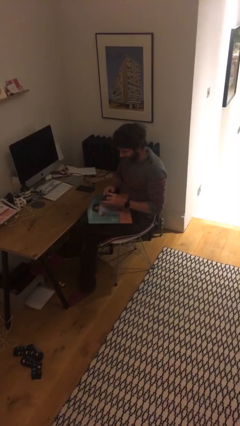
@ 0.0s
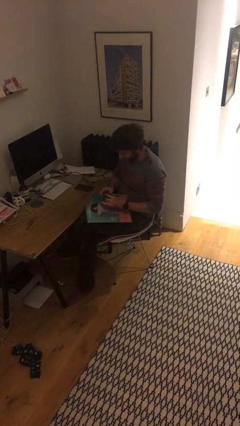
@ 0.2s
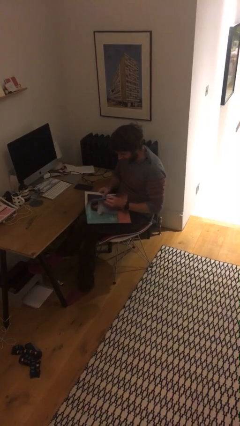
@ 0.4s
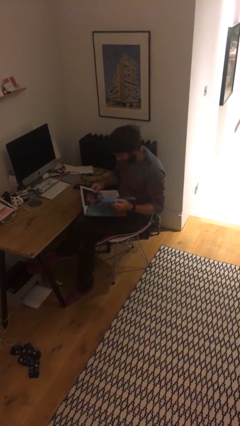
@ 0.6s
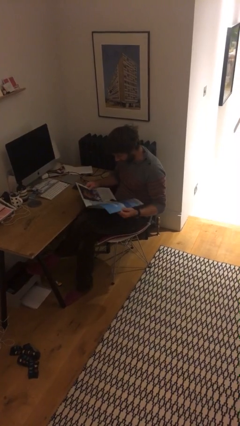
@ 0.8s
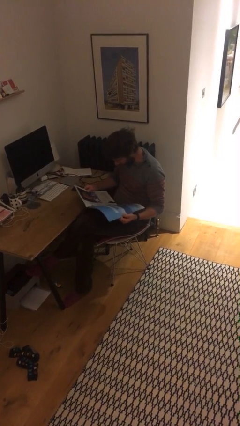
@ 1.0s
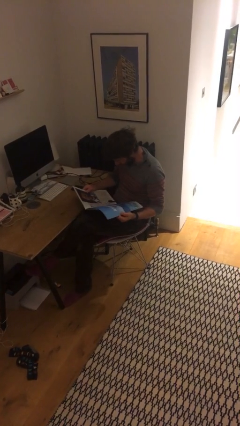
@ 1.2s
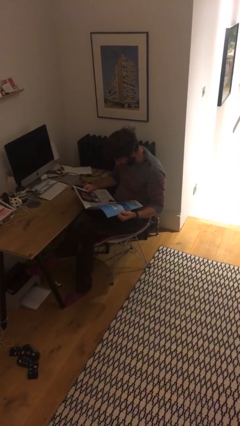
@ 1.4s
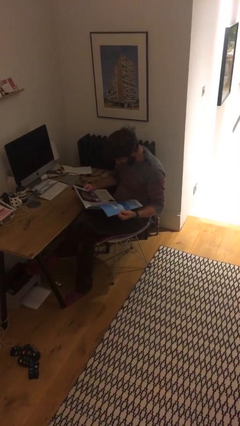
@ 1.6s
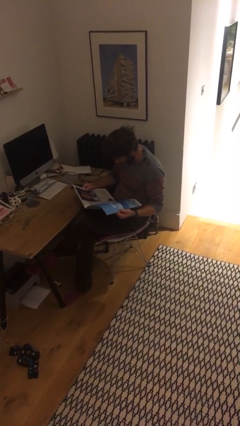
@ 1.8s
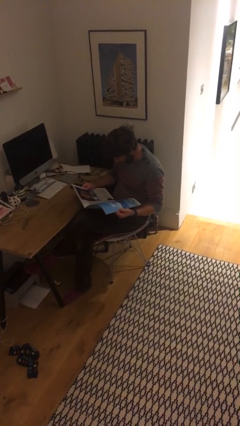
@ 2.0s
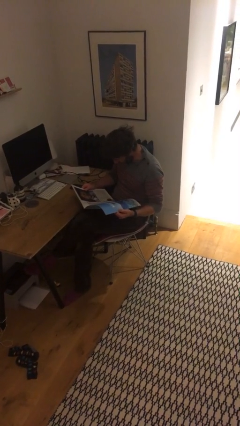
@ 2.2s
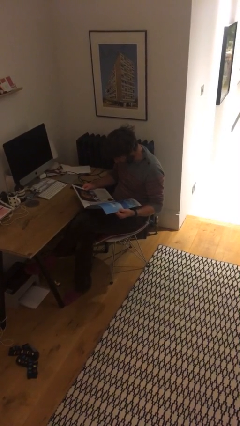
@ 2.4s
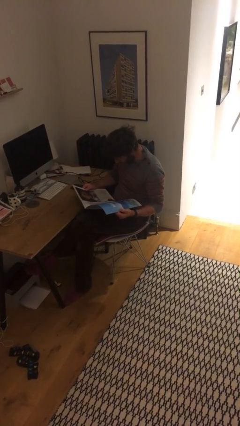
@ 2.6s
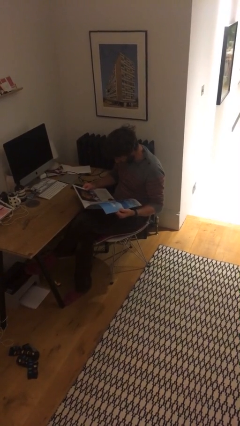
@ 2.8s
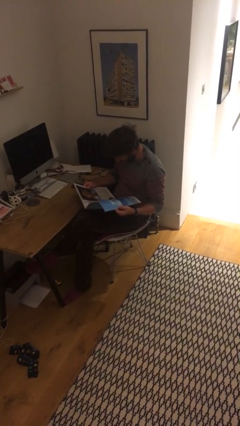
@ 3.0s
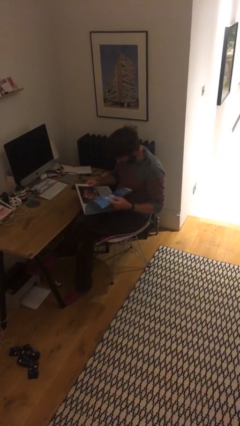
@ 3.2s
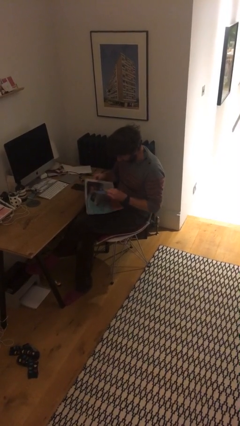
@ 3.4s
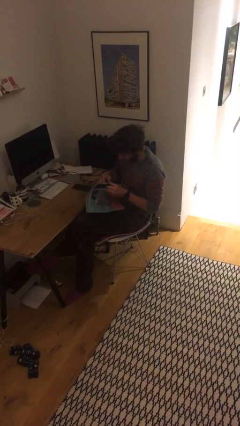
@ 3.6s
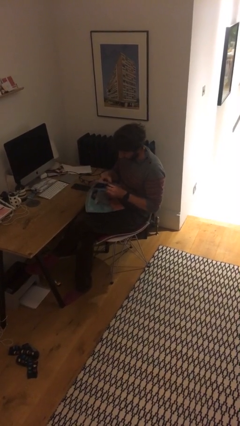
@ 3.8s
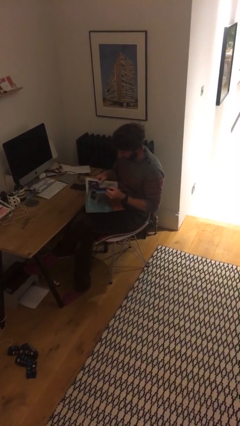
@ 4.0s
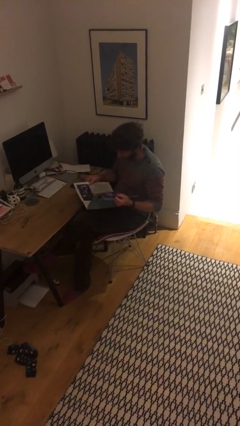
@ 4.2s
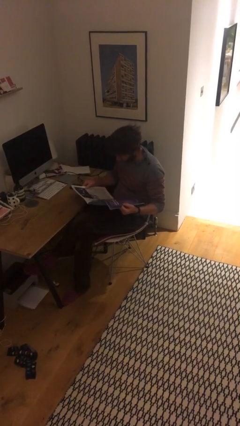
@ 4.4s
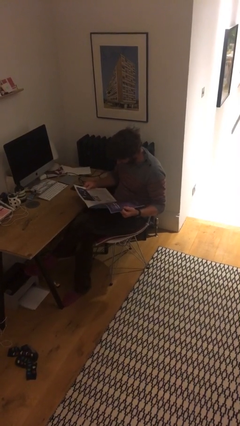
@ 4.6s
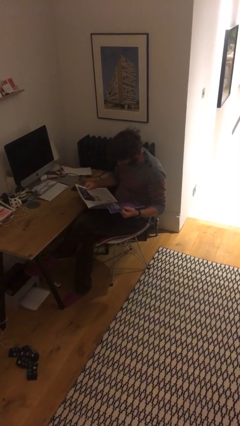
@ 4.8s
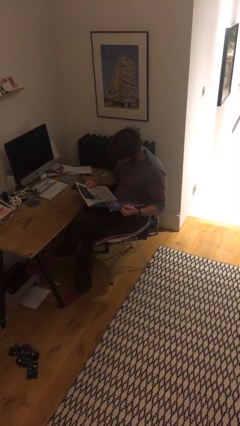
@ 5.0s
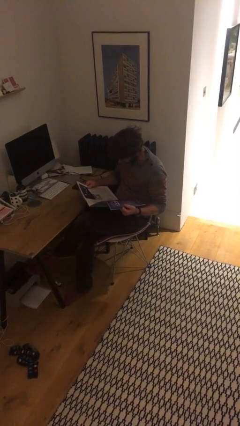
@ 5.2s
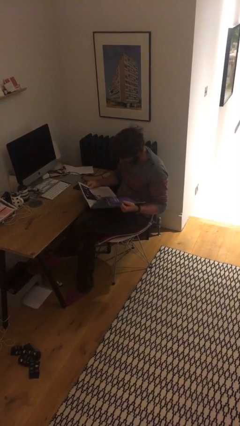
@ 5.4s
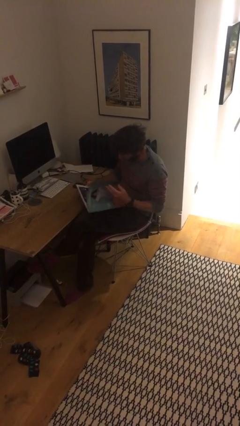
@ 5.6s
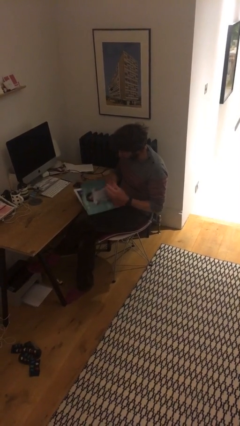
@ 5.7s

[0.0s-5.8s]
person reads document

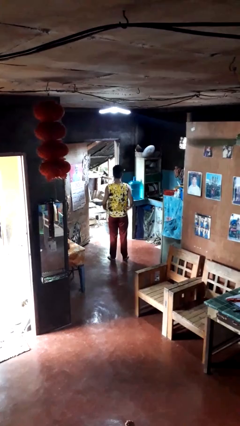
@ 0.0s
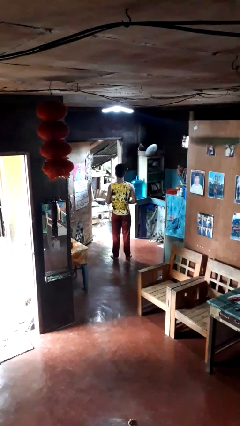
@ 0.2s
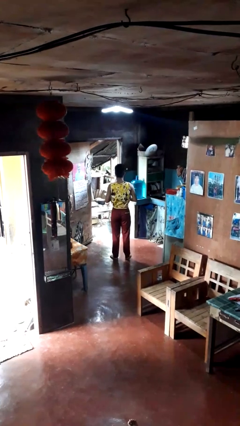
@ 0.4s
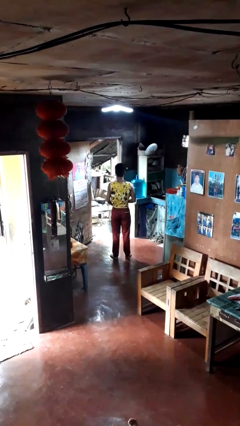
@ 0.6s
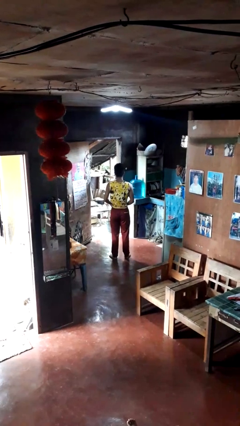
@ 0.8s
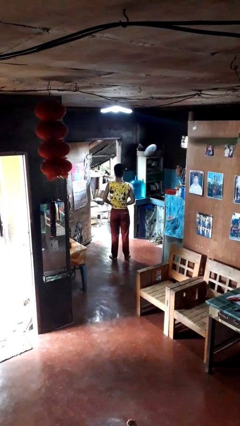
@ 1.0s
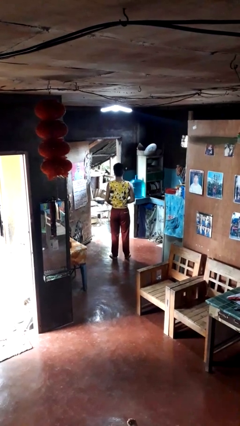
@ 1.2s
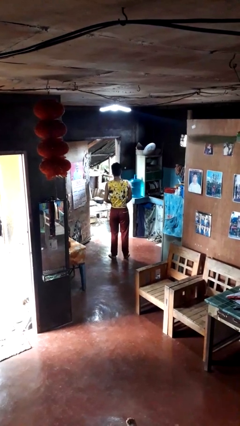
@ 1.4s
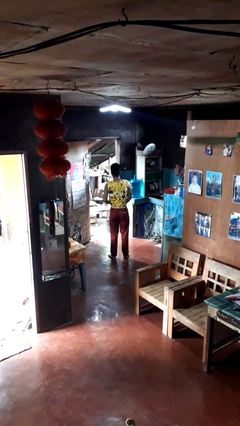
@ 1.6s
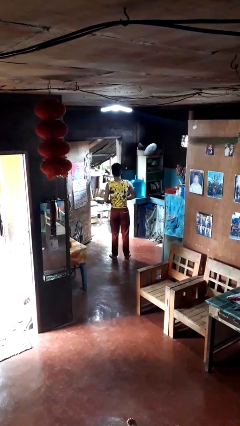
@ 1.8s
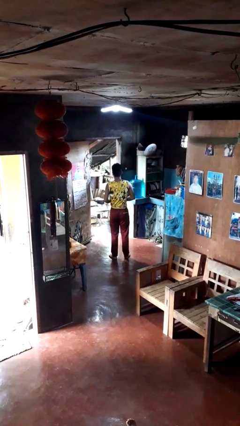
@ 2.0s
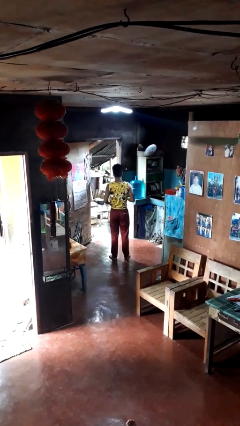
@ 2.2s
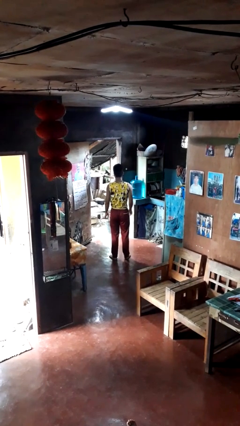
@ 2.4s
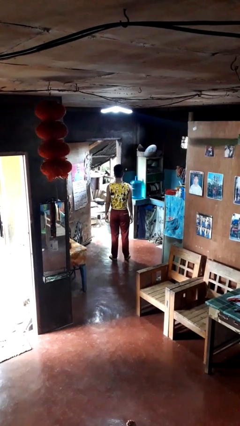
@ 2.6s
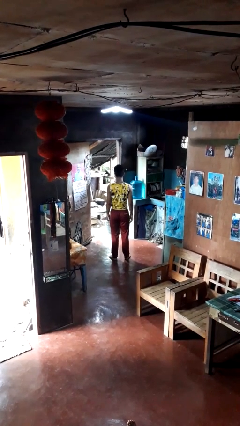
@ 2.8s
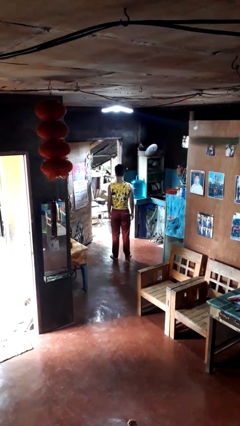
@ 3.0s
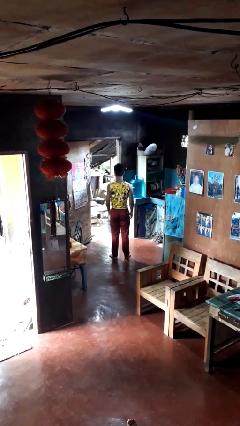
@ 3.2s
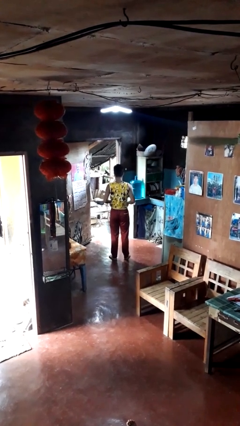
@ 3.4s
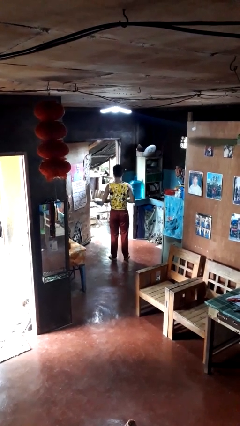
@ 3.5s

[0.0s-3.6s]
person tucks in shirt

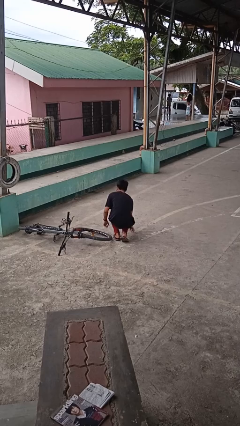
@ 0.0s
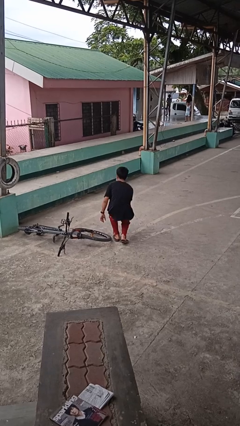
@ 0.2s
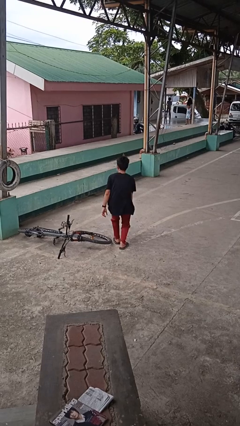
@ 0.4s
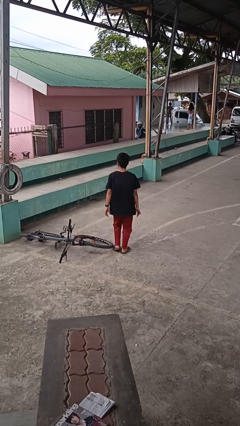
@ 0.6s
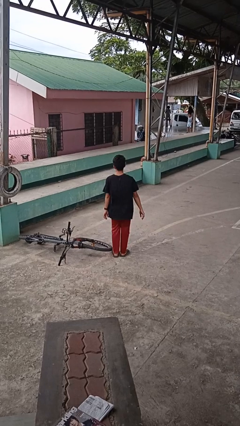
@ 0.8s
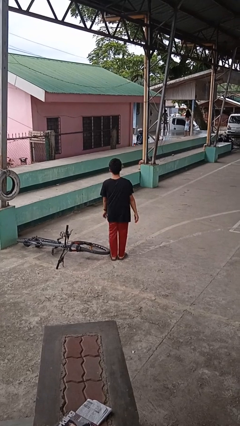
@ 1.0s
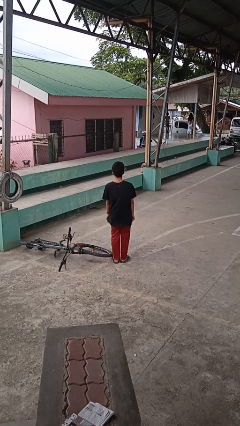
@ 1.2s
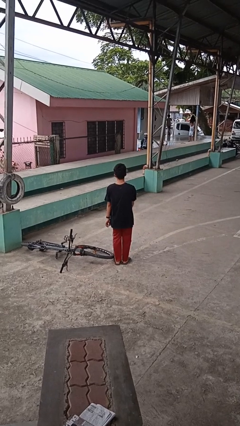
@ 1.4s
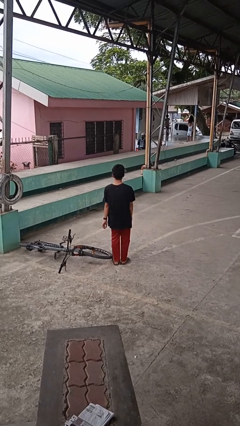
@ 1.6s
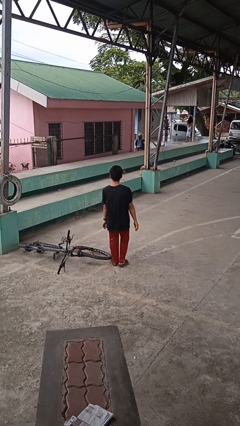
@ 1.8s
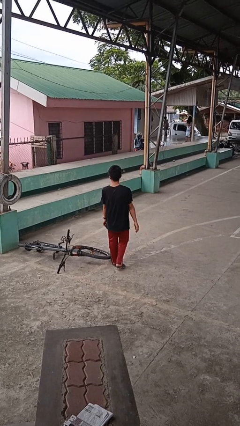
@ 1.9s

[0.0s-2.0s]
person stands up from floor

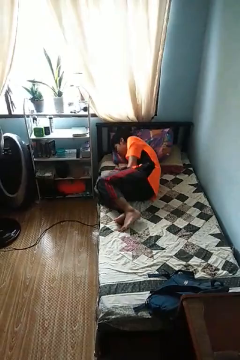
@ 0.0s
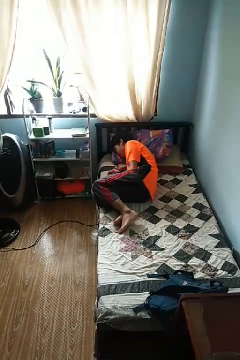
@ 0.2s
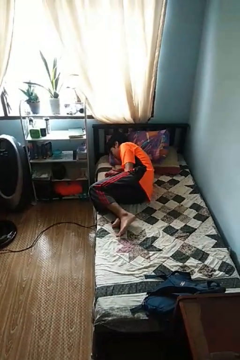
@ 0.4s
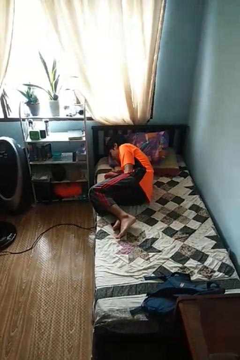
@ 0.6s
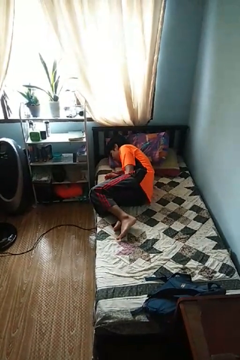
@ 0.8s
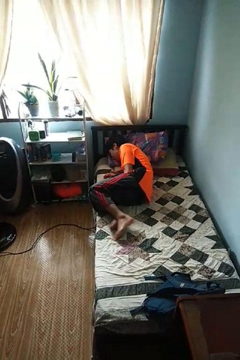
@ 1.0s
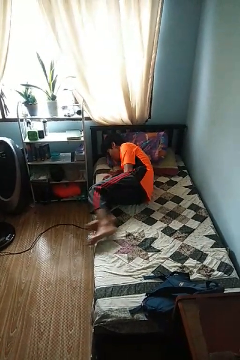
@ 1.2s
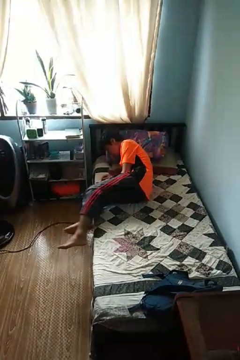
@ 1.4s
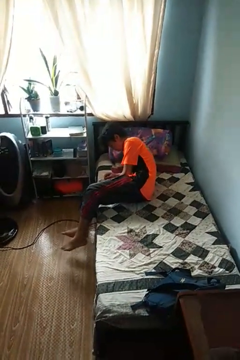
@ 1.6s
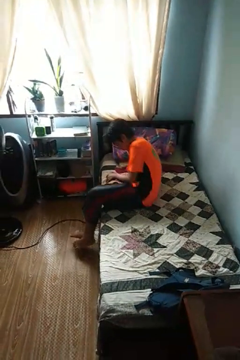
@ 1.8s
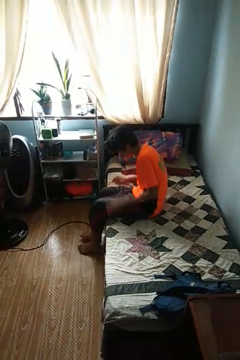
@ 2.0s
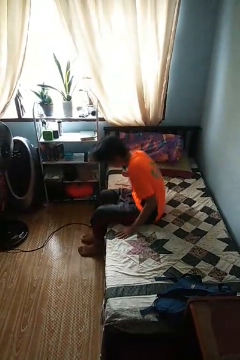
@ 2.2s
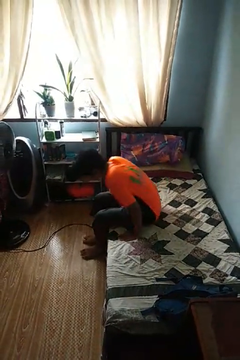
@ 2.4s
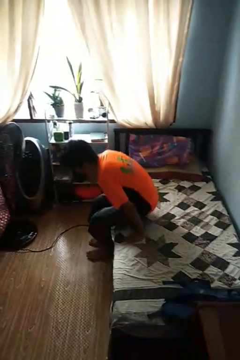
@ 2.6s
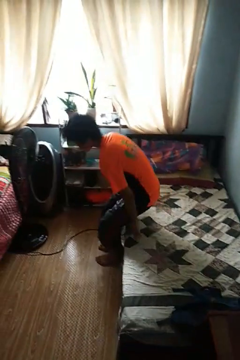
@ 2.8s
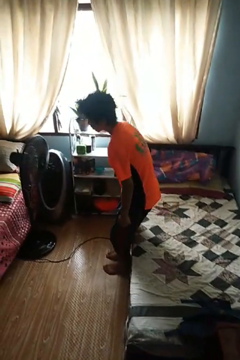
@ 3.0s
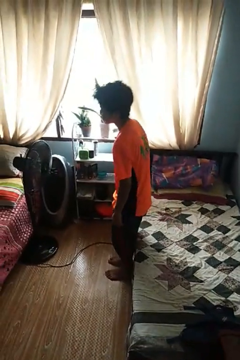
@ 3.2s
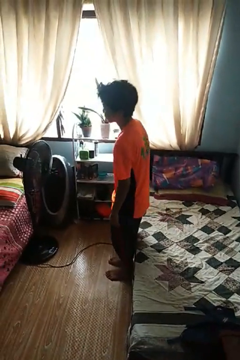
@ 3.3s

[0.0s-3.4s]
person stands up

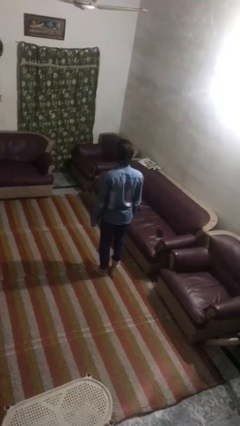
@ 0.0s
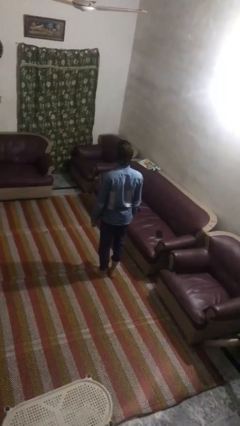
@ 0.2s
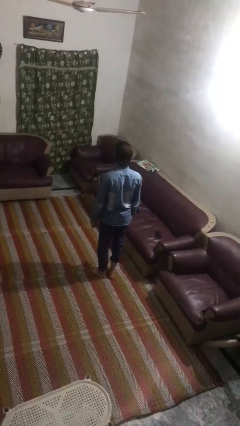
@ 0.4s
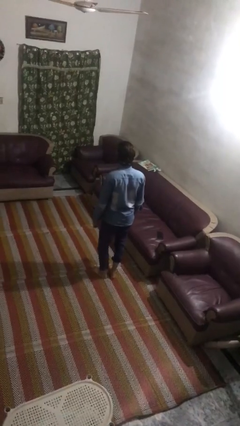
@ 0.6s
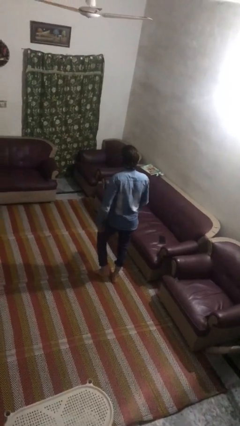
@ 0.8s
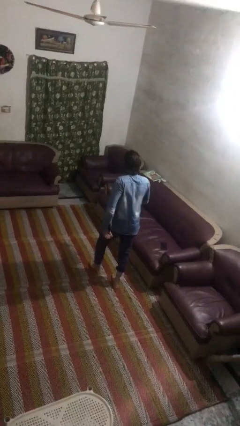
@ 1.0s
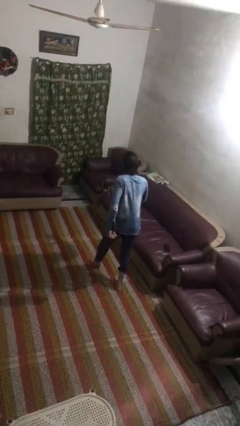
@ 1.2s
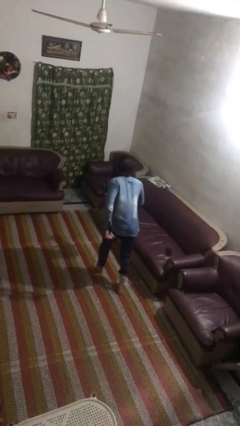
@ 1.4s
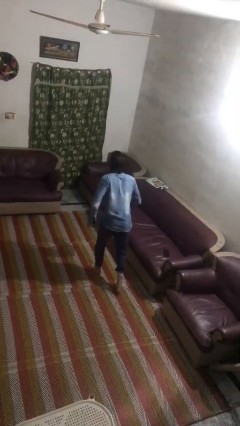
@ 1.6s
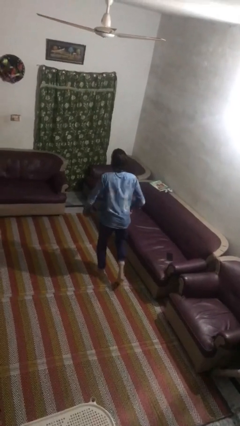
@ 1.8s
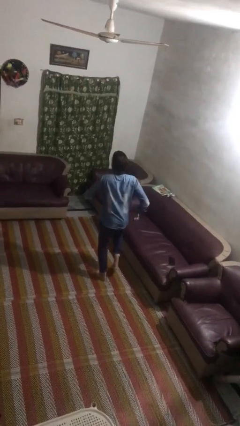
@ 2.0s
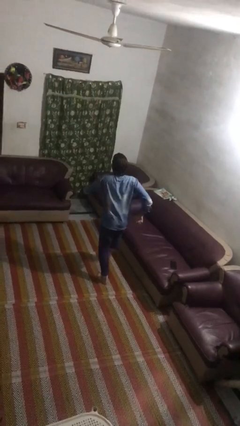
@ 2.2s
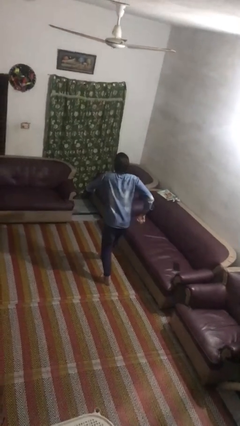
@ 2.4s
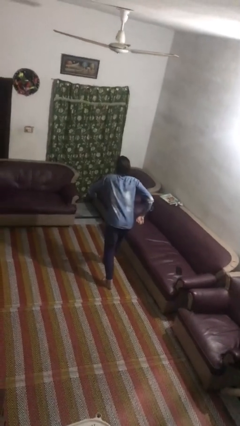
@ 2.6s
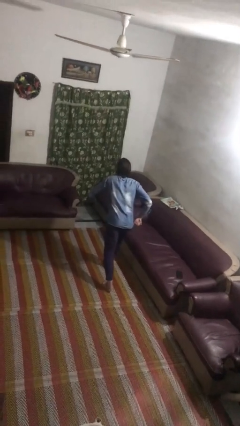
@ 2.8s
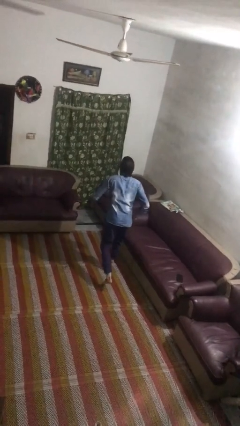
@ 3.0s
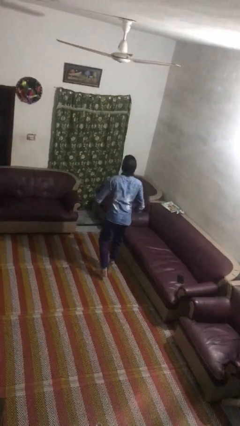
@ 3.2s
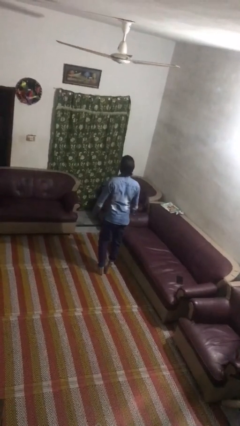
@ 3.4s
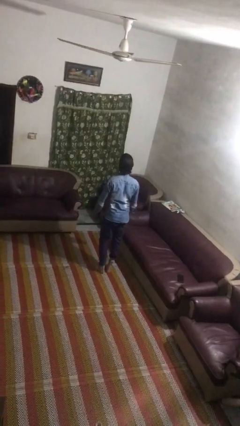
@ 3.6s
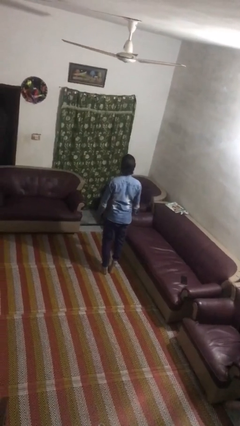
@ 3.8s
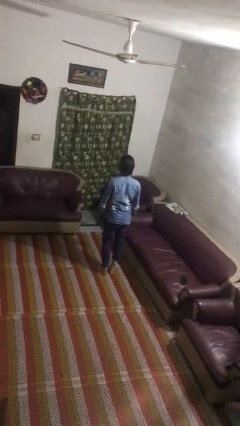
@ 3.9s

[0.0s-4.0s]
person walks tiptoe
